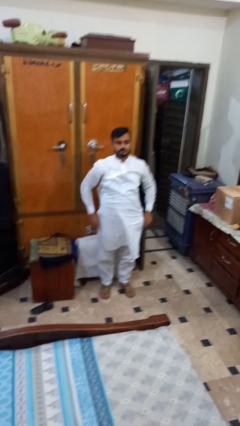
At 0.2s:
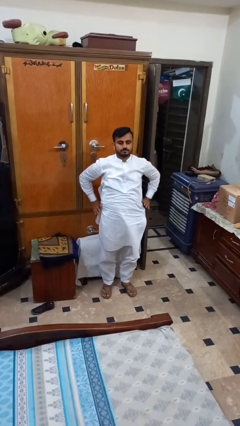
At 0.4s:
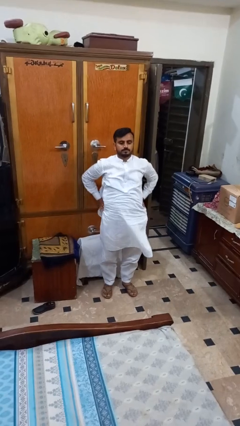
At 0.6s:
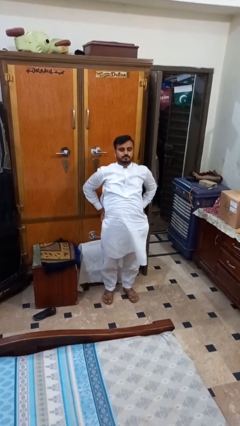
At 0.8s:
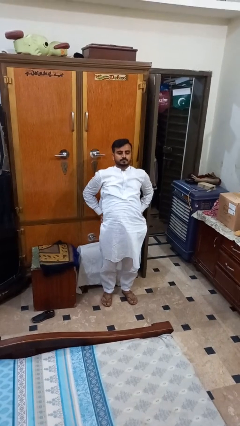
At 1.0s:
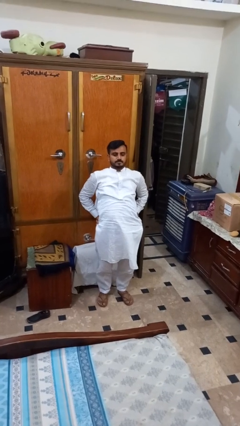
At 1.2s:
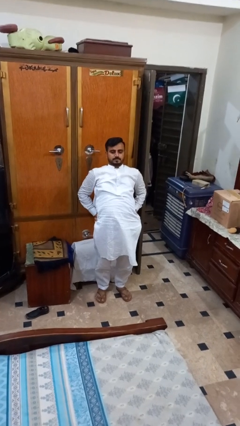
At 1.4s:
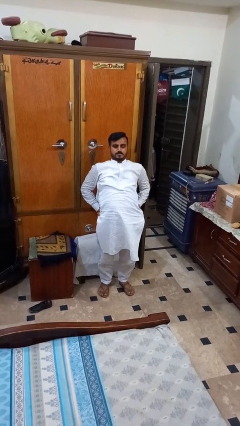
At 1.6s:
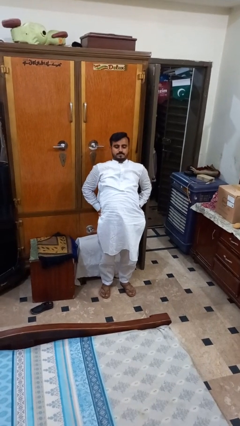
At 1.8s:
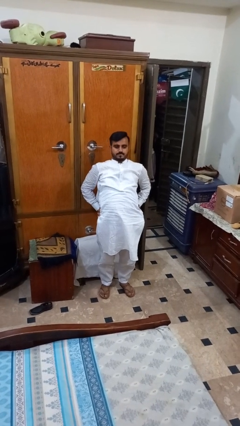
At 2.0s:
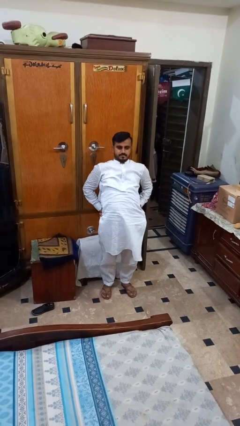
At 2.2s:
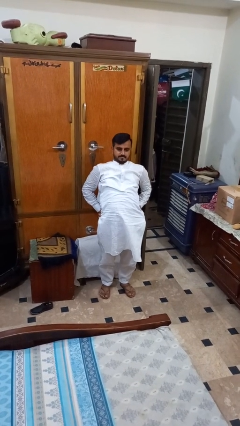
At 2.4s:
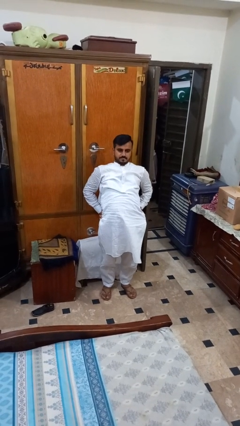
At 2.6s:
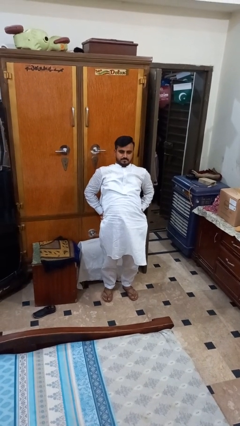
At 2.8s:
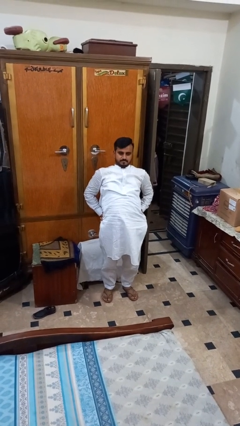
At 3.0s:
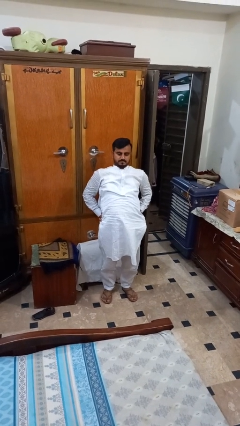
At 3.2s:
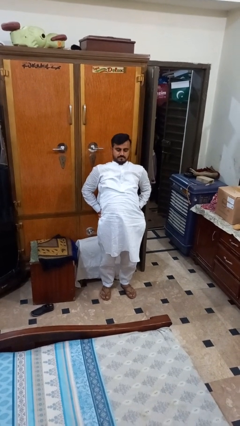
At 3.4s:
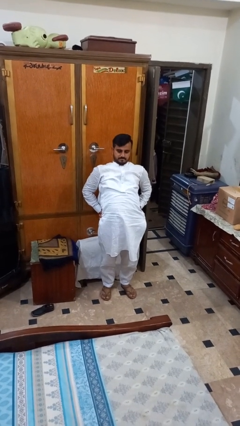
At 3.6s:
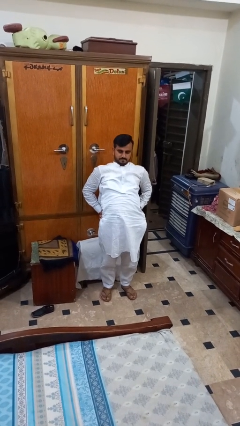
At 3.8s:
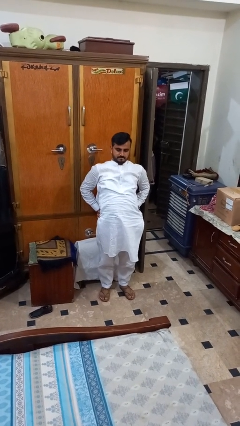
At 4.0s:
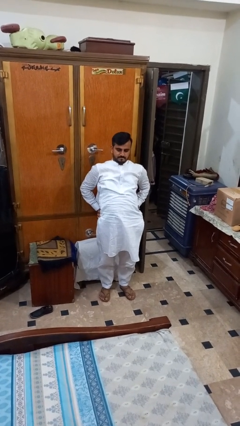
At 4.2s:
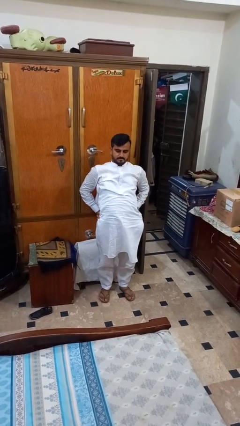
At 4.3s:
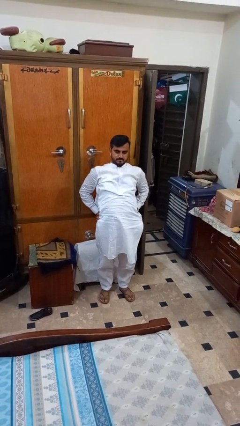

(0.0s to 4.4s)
person stretches back

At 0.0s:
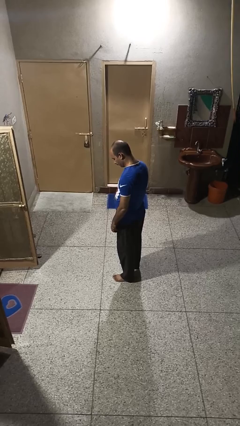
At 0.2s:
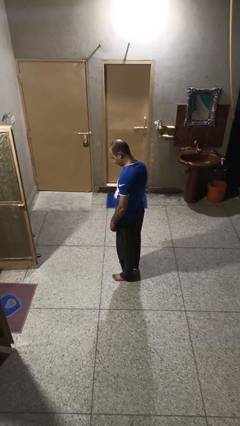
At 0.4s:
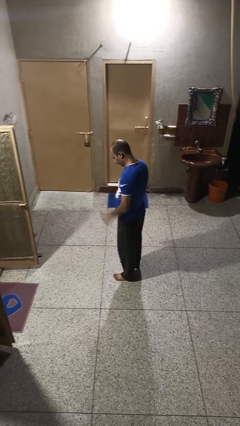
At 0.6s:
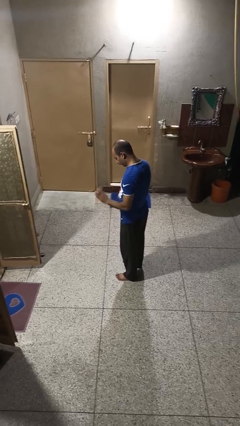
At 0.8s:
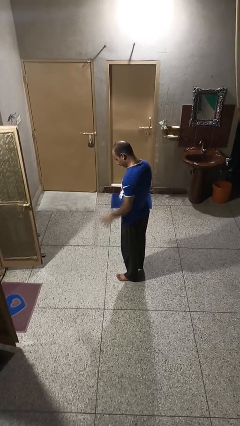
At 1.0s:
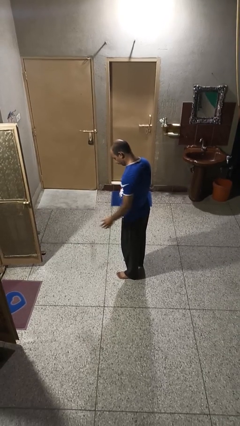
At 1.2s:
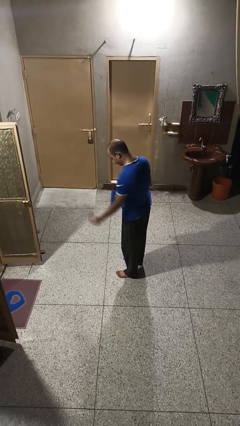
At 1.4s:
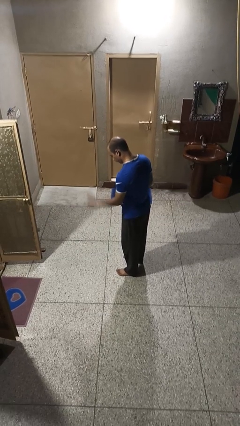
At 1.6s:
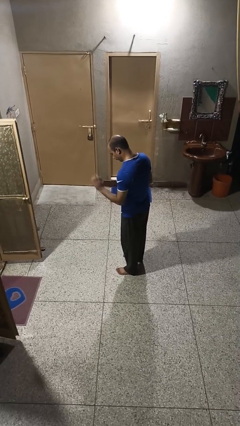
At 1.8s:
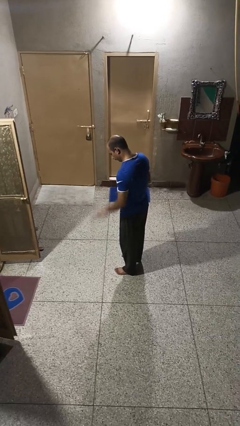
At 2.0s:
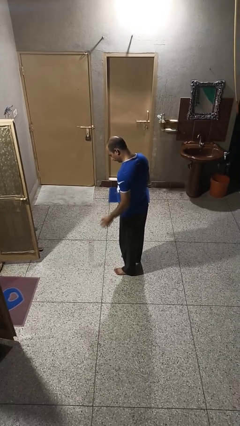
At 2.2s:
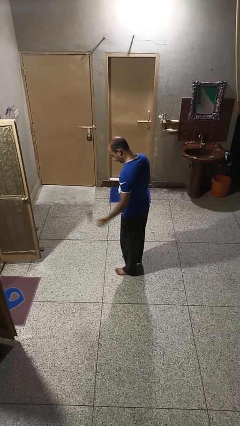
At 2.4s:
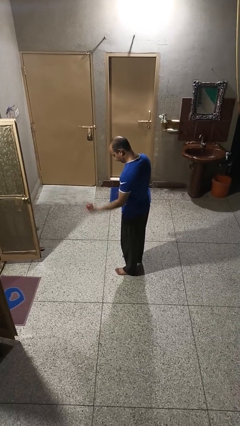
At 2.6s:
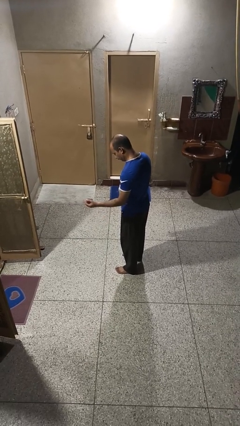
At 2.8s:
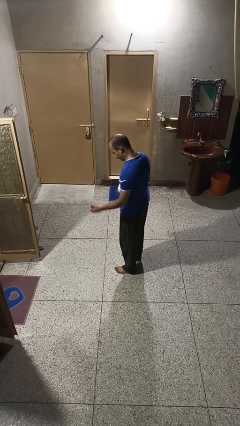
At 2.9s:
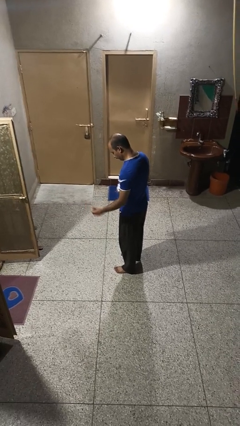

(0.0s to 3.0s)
person bounces ball on floor

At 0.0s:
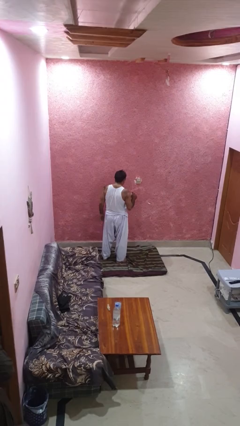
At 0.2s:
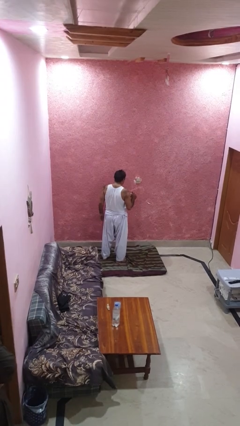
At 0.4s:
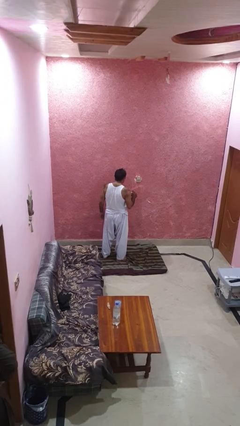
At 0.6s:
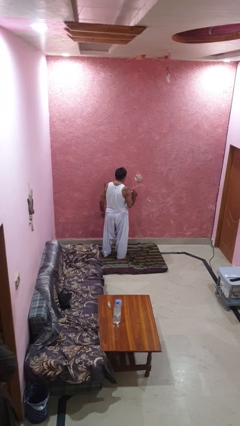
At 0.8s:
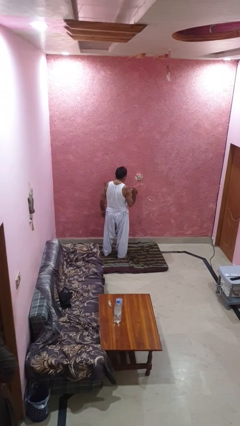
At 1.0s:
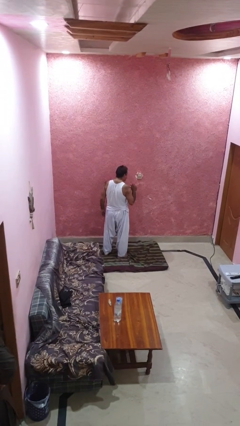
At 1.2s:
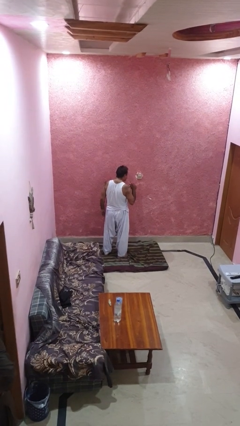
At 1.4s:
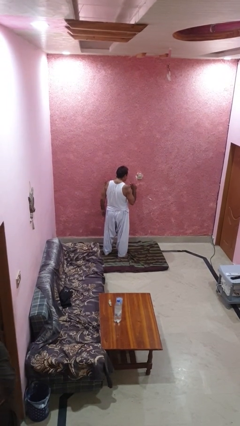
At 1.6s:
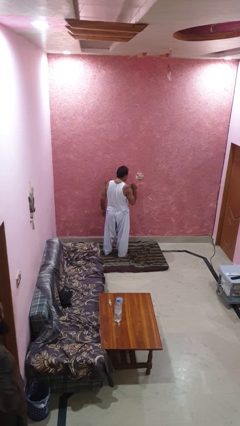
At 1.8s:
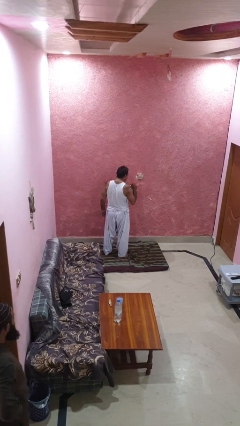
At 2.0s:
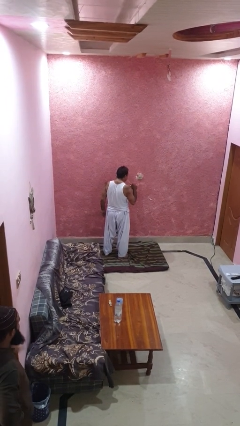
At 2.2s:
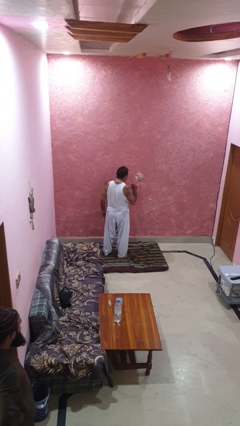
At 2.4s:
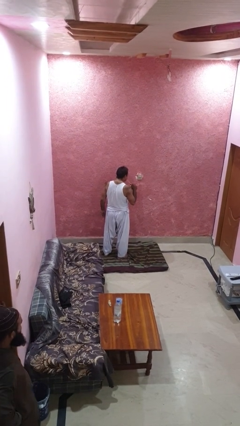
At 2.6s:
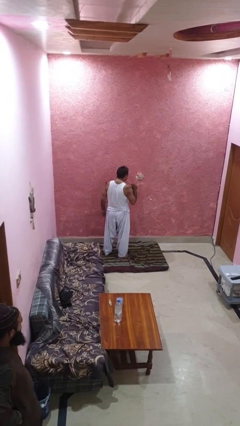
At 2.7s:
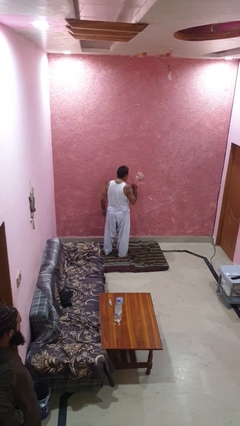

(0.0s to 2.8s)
person drinks from straw

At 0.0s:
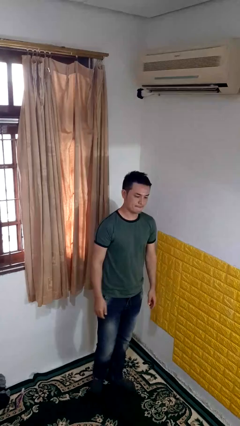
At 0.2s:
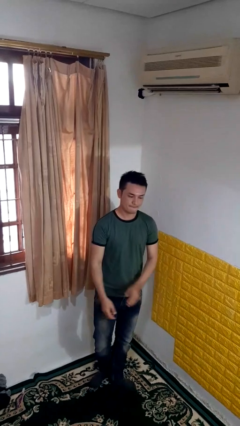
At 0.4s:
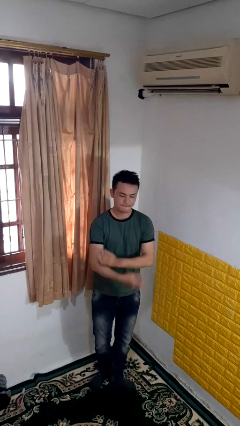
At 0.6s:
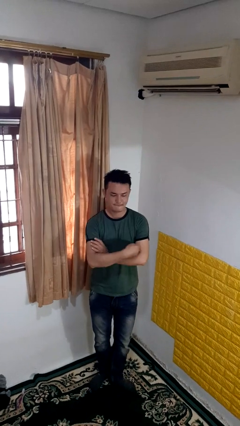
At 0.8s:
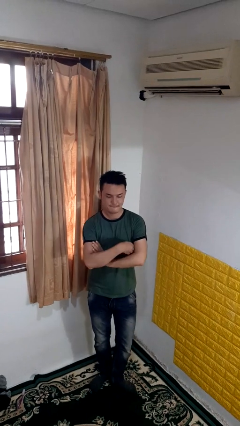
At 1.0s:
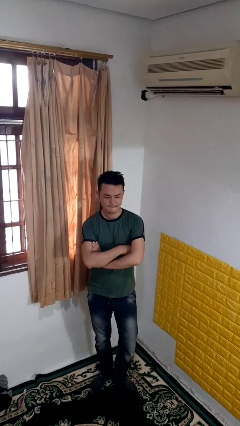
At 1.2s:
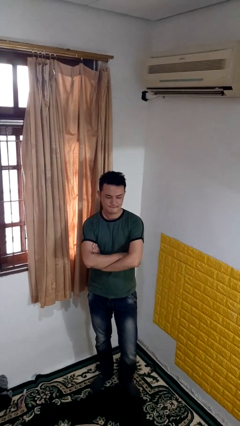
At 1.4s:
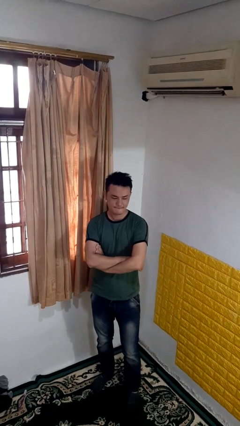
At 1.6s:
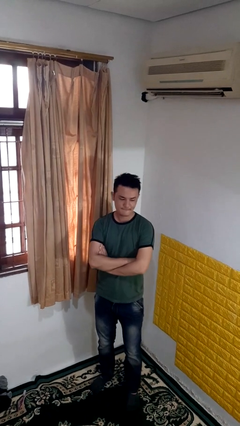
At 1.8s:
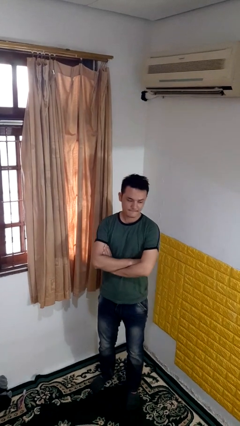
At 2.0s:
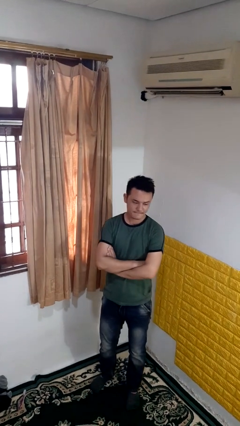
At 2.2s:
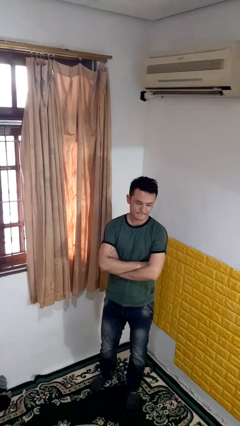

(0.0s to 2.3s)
person crosses arms

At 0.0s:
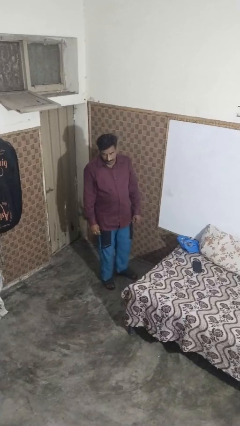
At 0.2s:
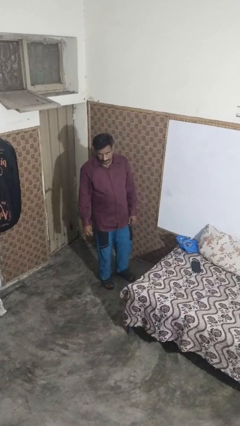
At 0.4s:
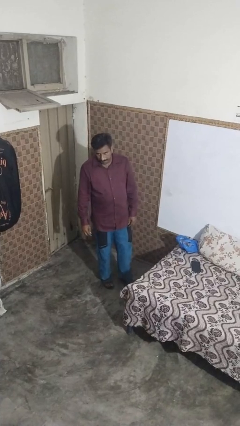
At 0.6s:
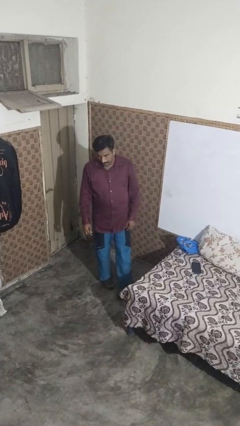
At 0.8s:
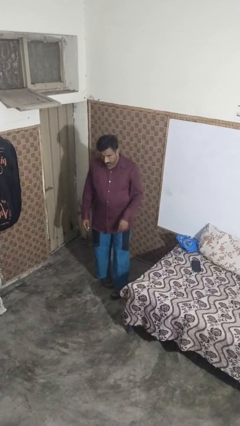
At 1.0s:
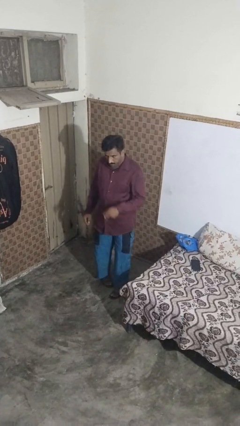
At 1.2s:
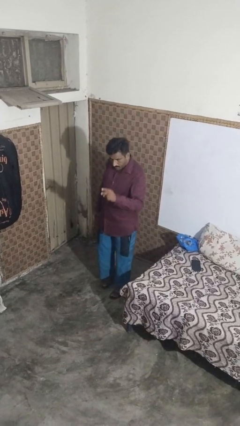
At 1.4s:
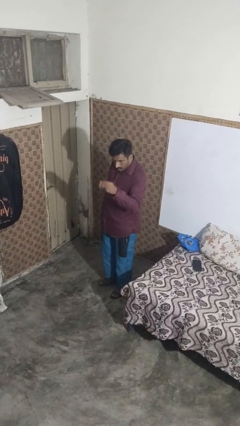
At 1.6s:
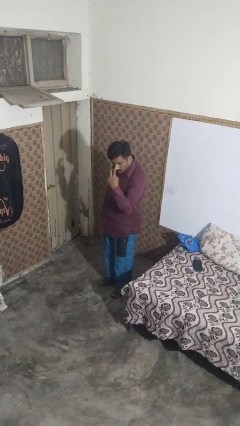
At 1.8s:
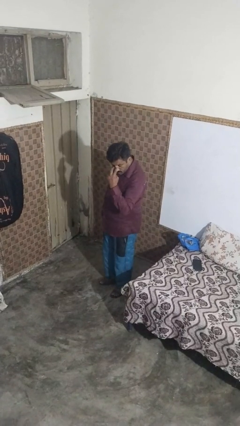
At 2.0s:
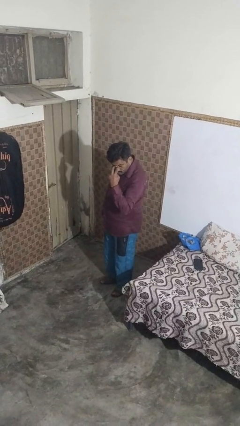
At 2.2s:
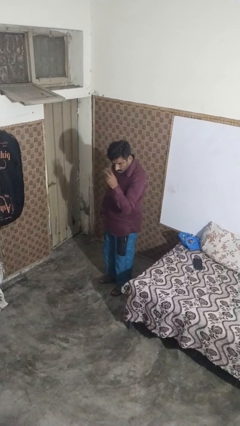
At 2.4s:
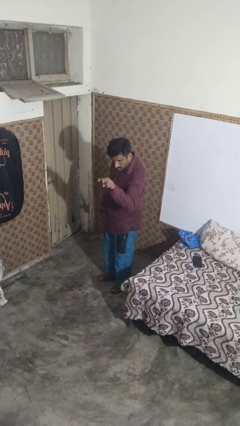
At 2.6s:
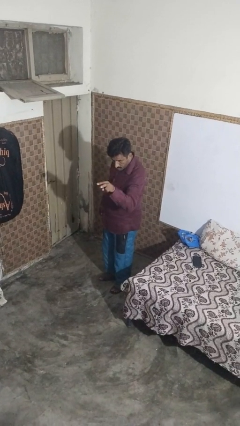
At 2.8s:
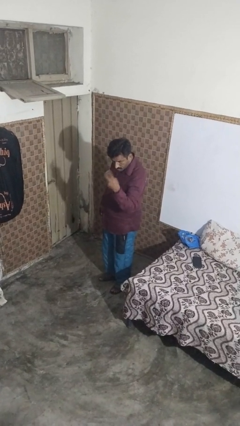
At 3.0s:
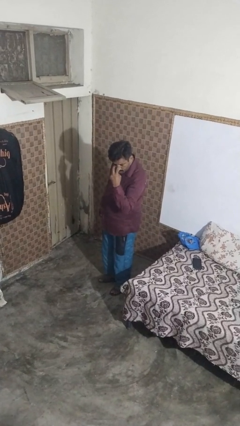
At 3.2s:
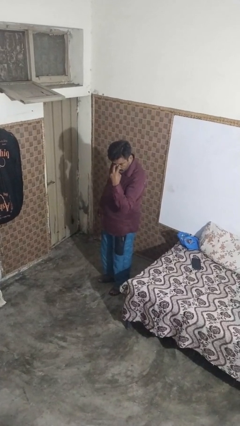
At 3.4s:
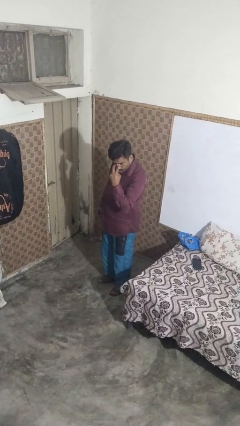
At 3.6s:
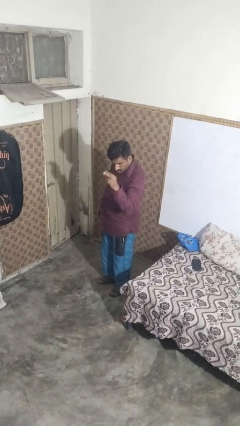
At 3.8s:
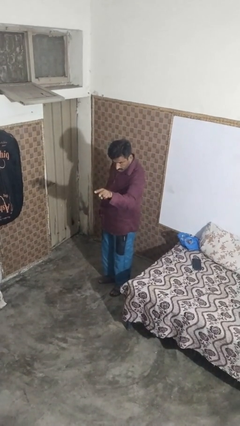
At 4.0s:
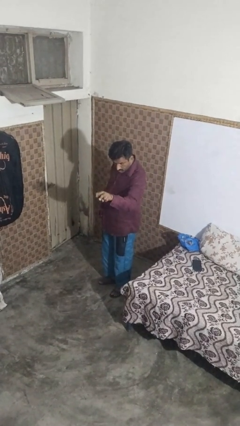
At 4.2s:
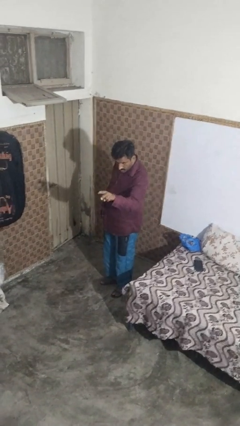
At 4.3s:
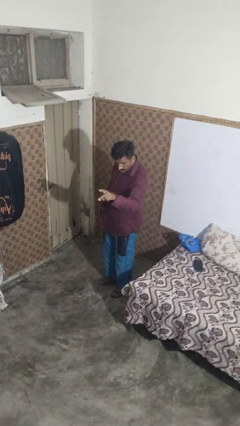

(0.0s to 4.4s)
person gestures watch closely

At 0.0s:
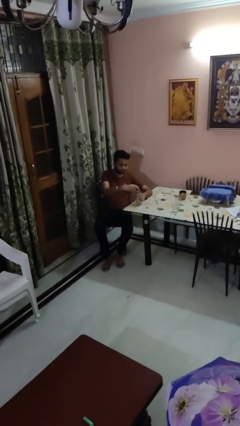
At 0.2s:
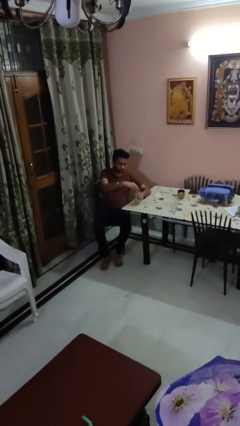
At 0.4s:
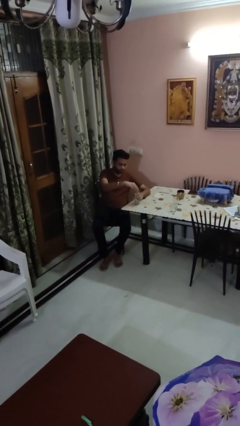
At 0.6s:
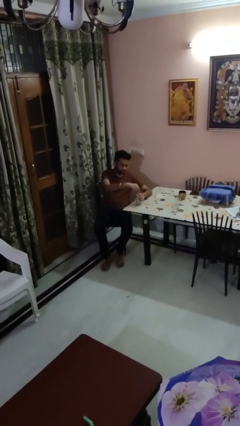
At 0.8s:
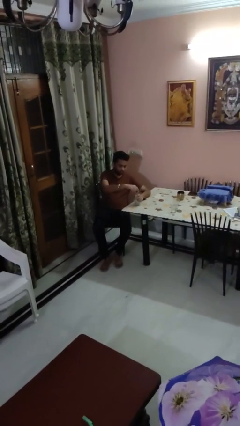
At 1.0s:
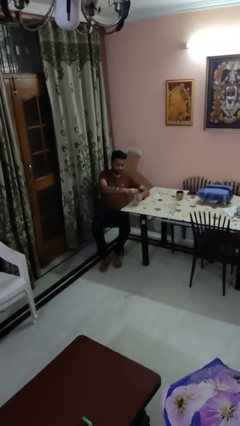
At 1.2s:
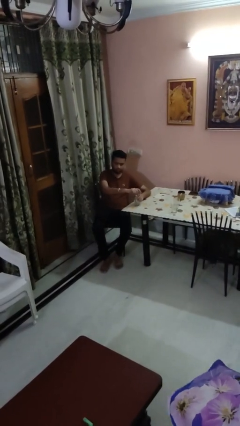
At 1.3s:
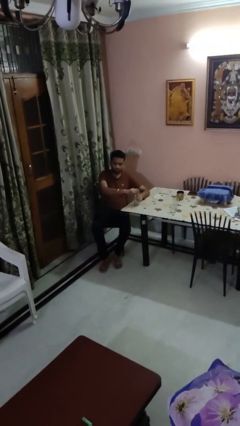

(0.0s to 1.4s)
person screws lid to bottle
